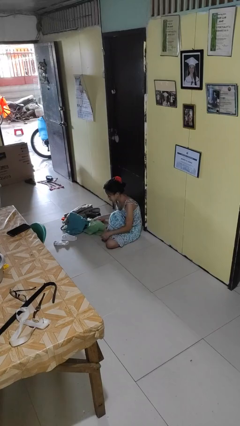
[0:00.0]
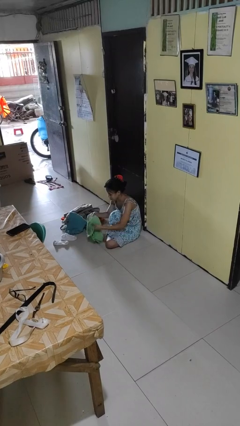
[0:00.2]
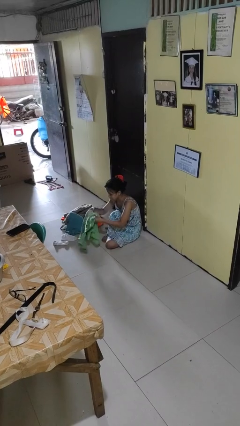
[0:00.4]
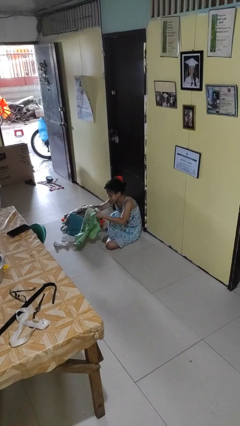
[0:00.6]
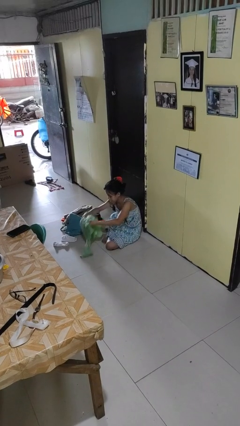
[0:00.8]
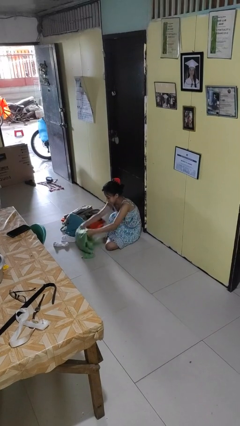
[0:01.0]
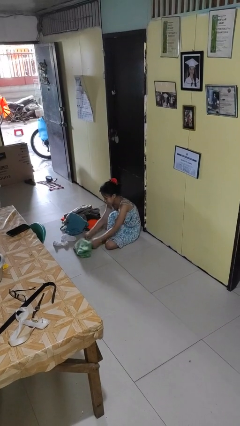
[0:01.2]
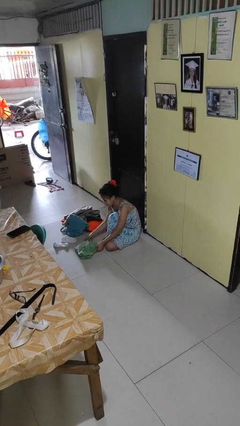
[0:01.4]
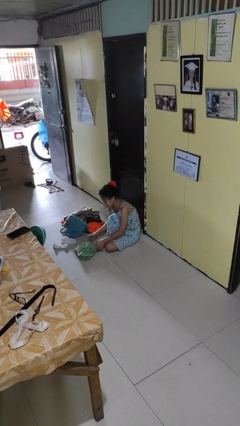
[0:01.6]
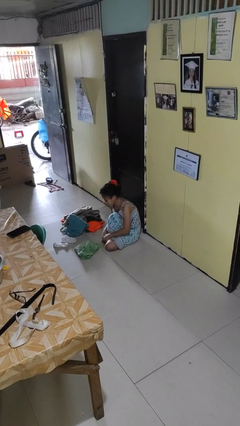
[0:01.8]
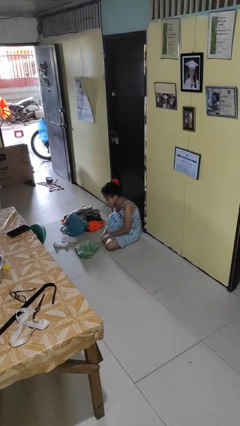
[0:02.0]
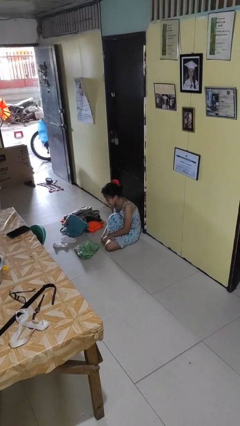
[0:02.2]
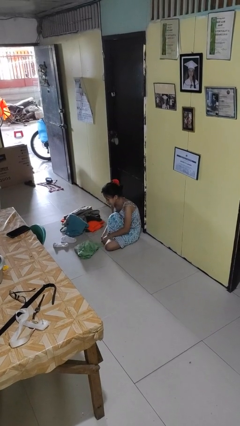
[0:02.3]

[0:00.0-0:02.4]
person folds shirt

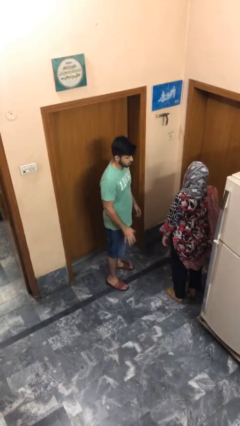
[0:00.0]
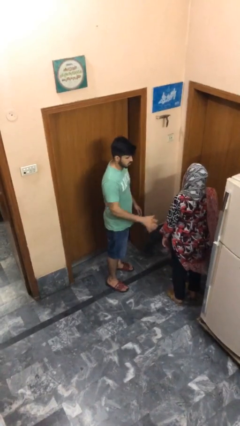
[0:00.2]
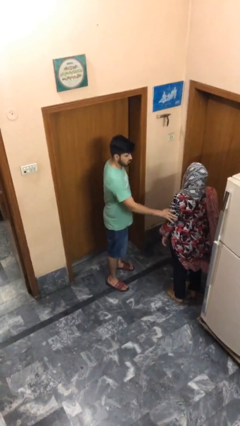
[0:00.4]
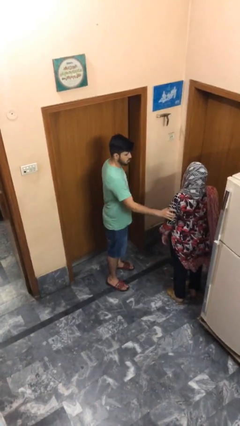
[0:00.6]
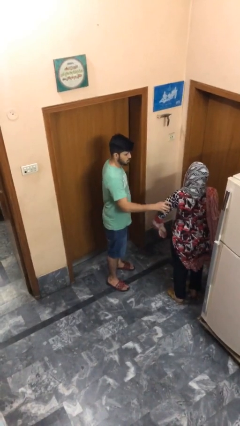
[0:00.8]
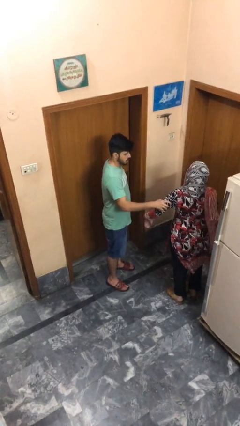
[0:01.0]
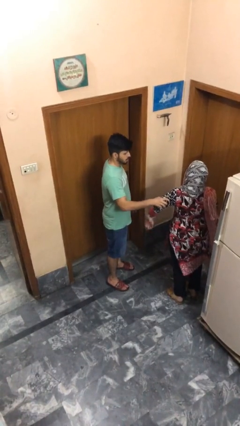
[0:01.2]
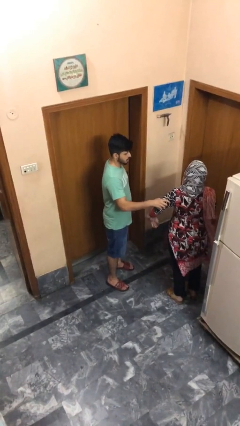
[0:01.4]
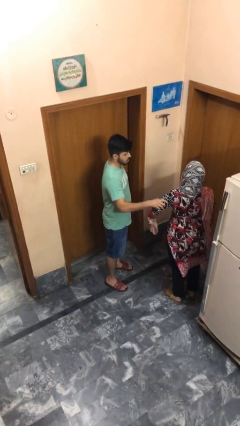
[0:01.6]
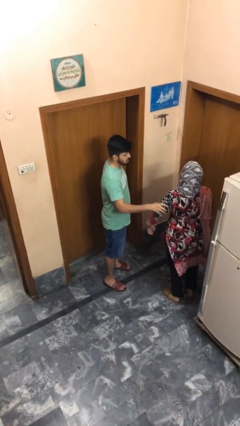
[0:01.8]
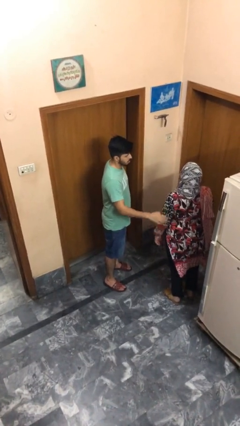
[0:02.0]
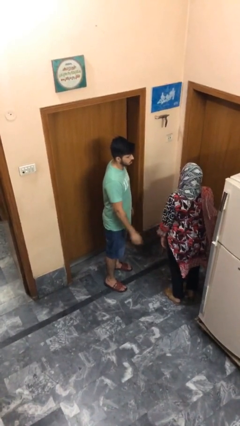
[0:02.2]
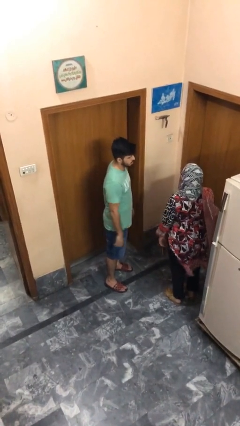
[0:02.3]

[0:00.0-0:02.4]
person grabs person by bicep

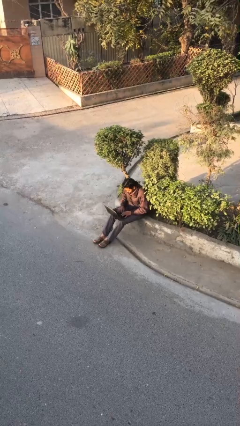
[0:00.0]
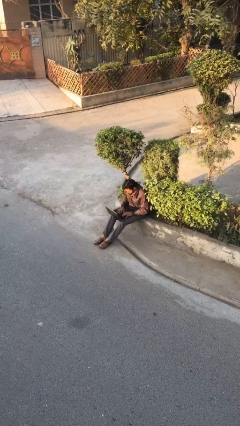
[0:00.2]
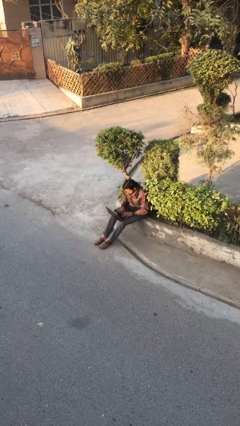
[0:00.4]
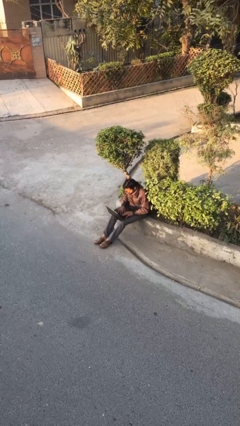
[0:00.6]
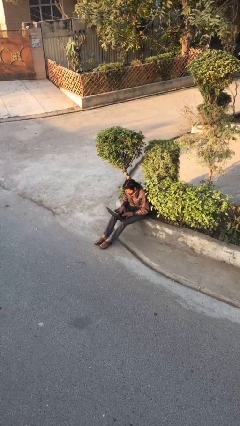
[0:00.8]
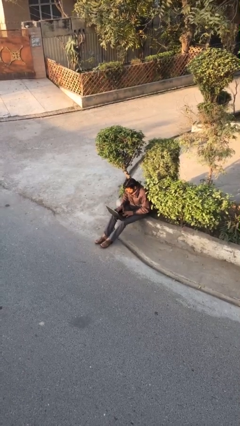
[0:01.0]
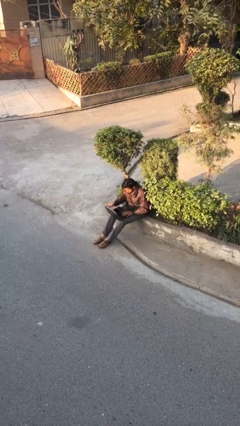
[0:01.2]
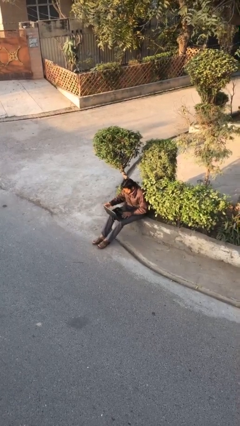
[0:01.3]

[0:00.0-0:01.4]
person interacts with laptop

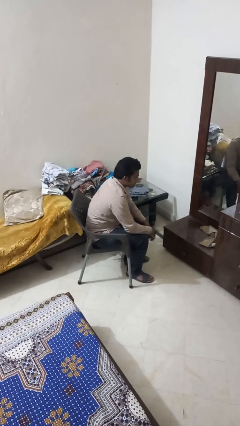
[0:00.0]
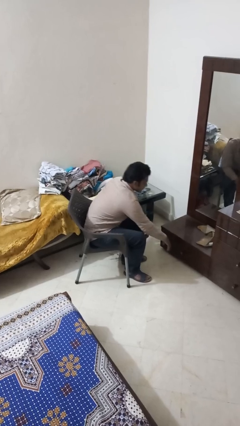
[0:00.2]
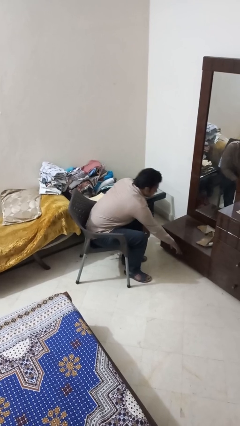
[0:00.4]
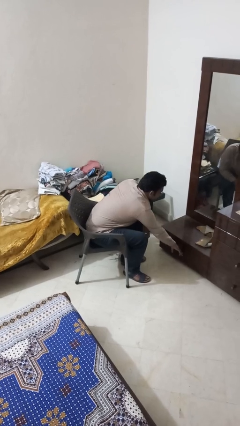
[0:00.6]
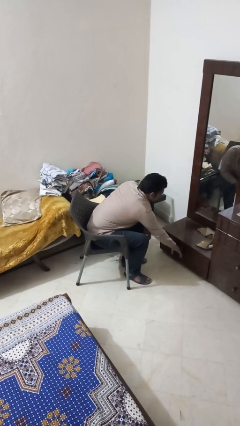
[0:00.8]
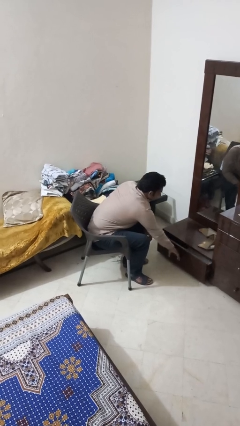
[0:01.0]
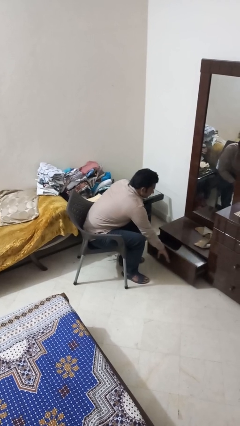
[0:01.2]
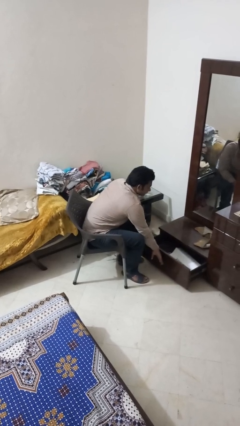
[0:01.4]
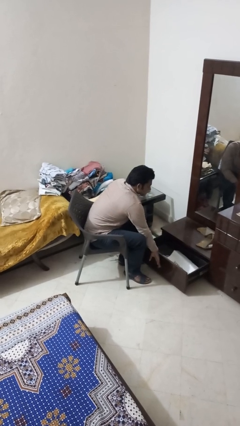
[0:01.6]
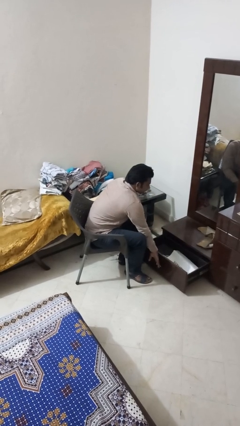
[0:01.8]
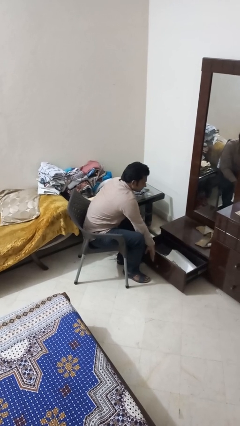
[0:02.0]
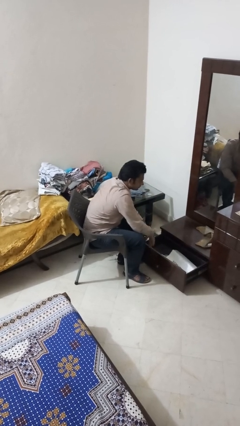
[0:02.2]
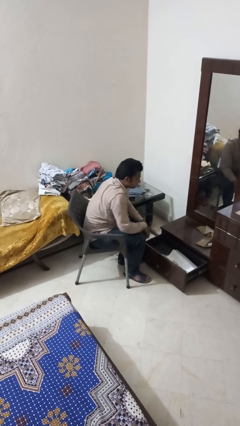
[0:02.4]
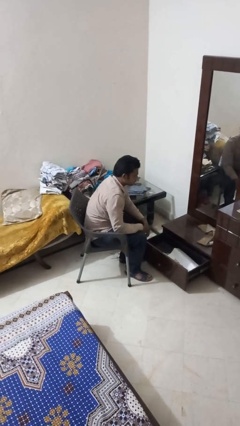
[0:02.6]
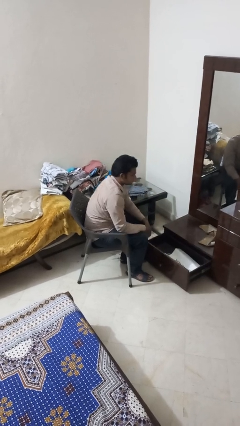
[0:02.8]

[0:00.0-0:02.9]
person opens dresser drawer

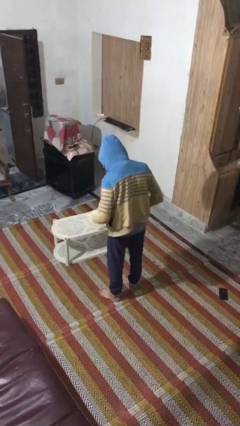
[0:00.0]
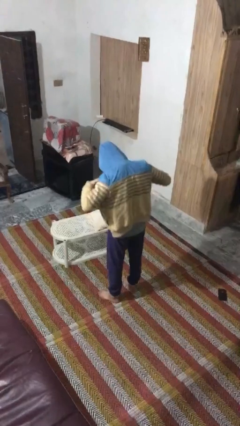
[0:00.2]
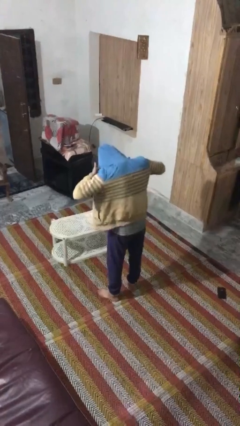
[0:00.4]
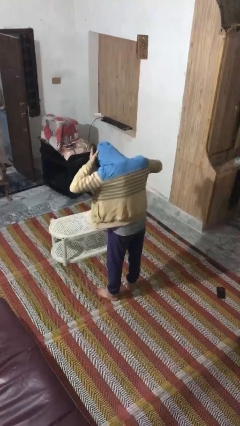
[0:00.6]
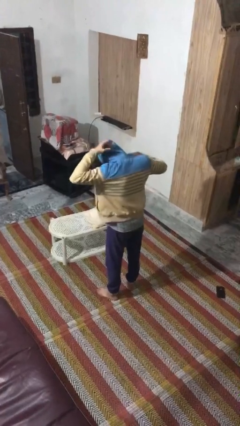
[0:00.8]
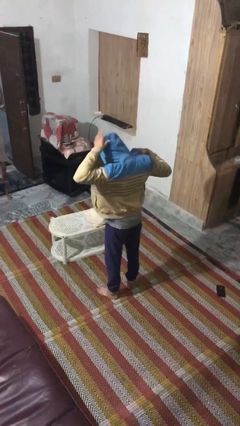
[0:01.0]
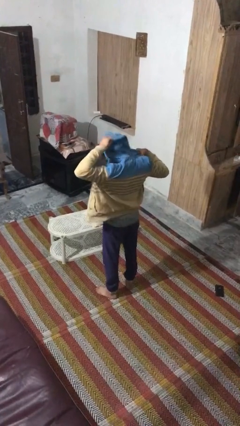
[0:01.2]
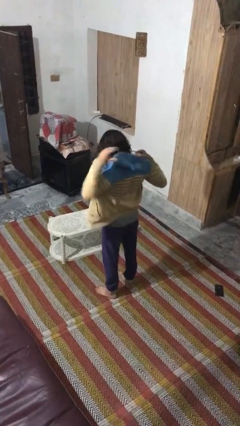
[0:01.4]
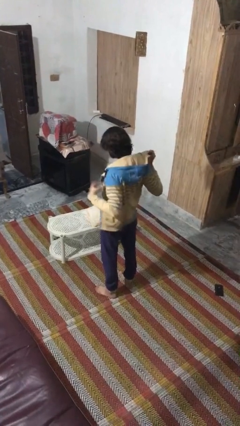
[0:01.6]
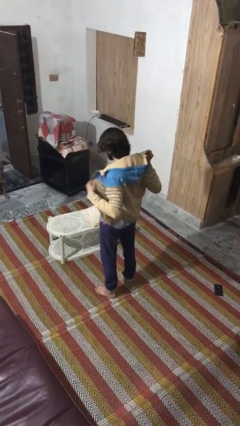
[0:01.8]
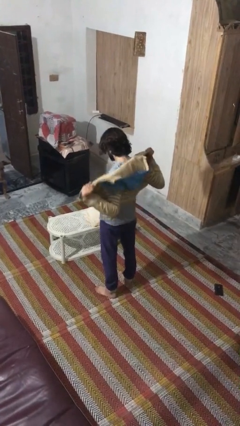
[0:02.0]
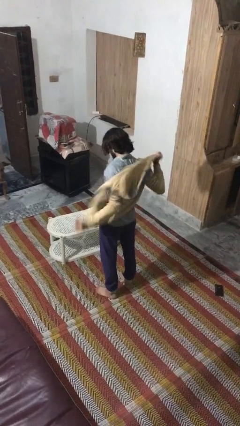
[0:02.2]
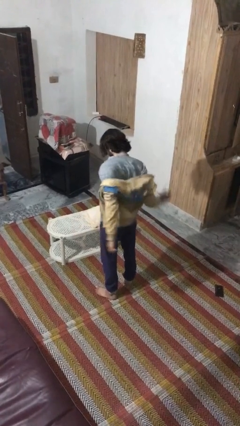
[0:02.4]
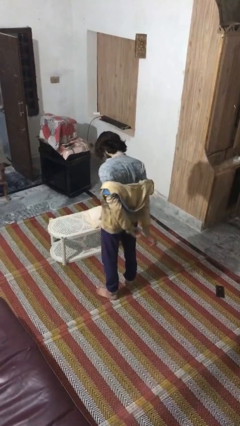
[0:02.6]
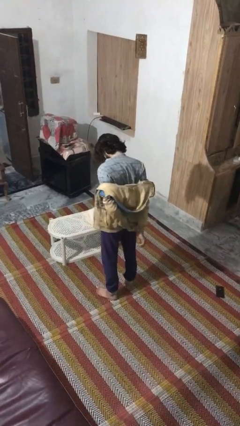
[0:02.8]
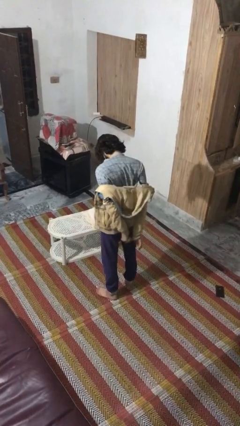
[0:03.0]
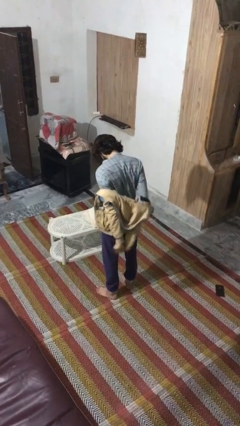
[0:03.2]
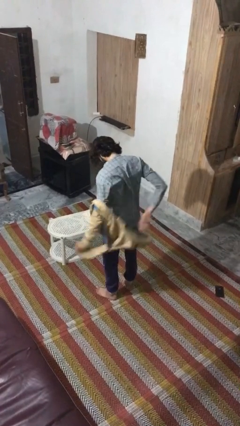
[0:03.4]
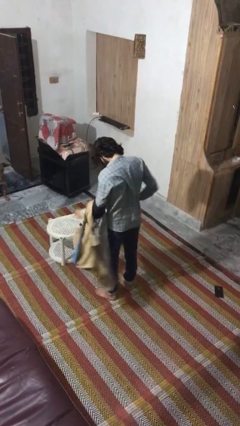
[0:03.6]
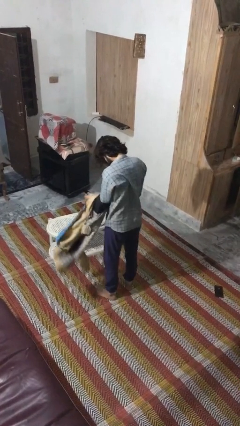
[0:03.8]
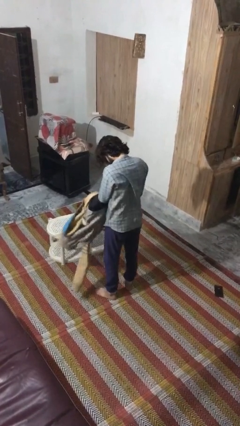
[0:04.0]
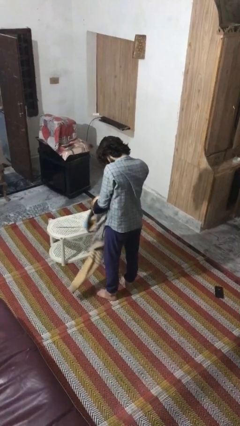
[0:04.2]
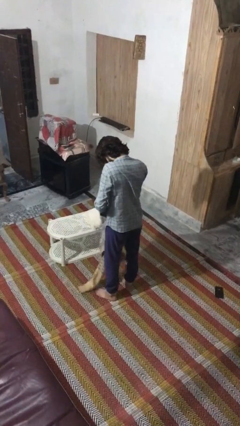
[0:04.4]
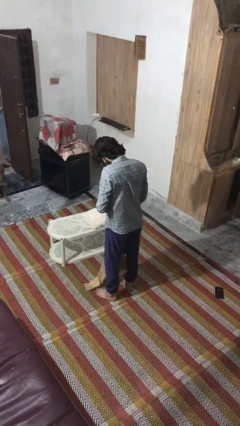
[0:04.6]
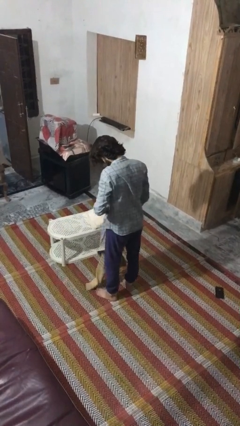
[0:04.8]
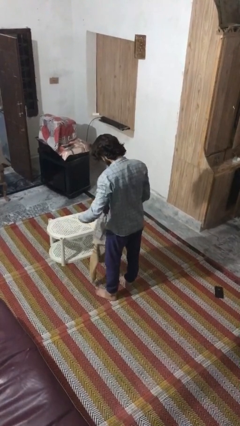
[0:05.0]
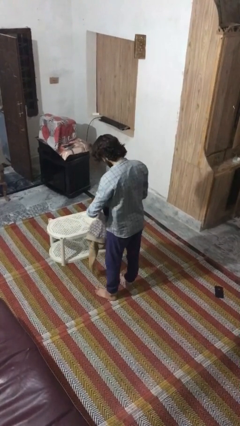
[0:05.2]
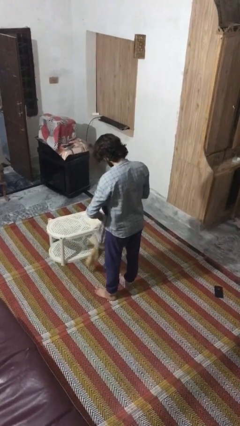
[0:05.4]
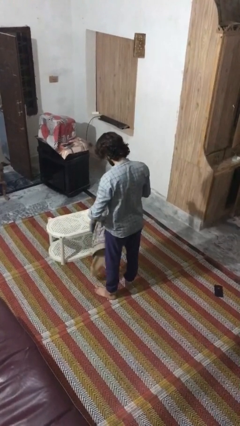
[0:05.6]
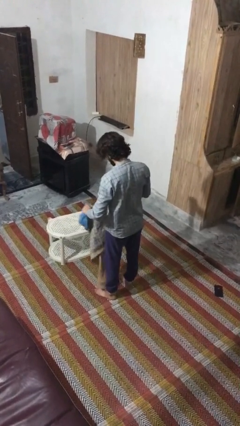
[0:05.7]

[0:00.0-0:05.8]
person takes off hoodie

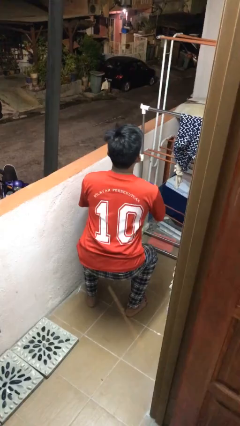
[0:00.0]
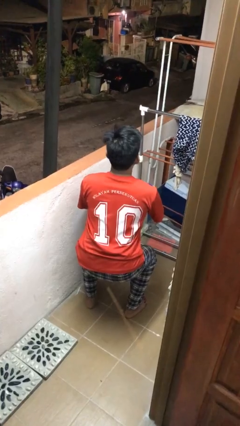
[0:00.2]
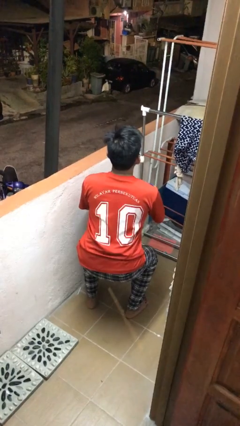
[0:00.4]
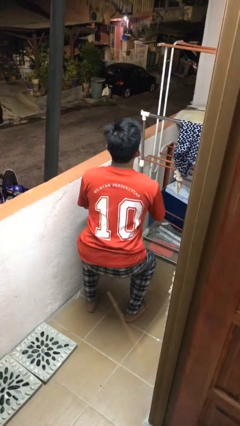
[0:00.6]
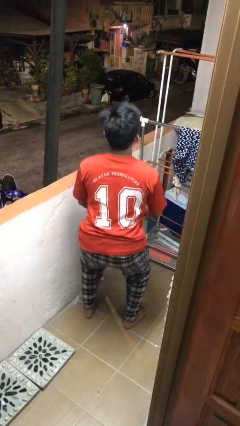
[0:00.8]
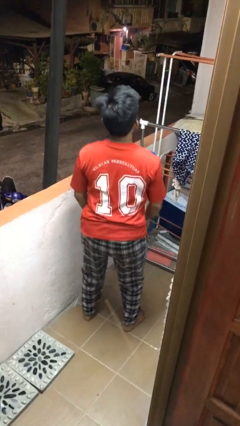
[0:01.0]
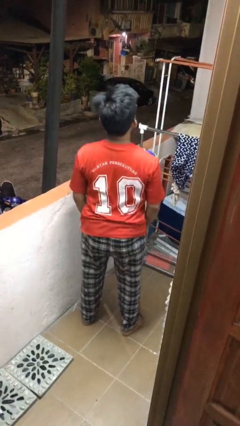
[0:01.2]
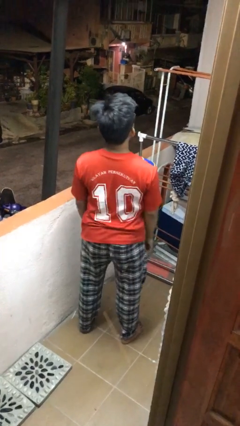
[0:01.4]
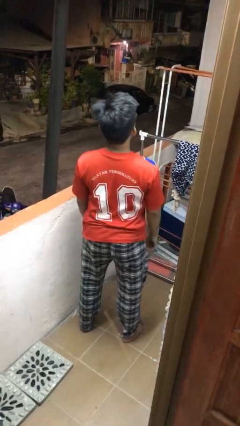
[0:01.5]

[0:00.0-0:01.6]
person stands up

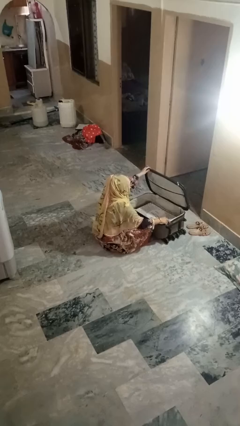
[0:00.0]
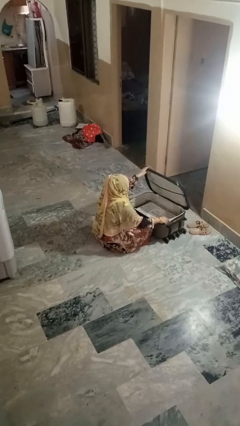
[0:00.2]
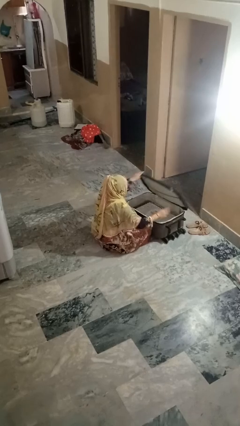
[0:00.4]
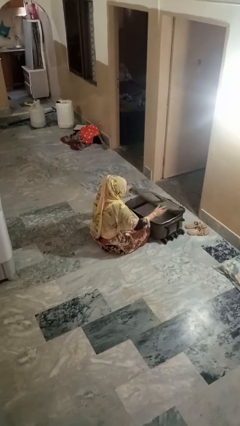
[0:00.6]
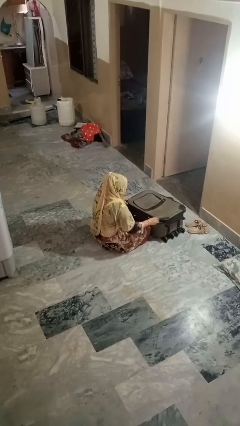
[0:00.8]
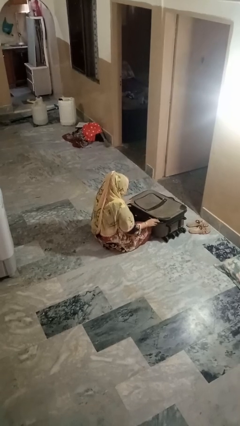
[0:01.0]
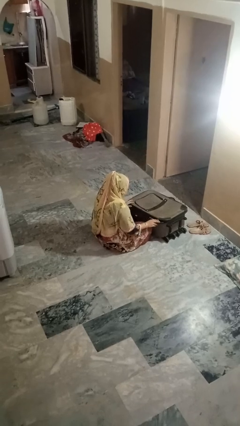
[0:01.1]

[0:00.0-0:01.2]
person closes suitcase
